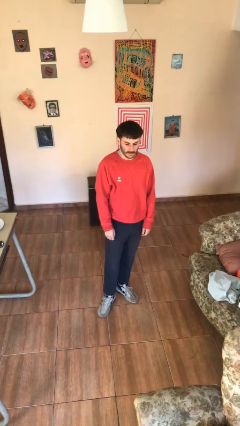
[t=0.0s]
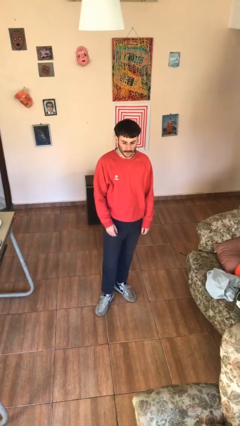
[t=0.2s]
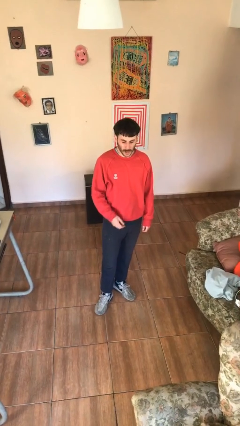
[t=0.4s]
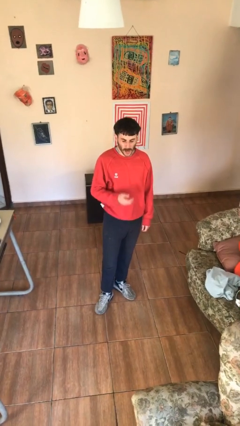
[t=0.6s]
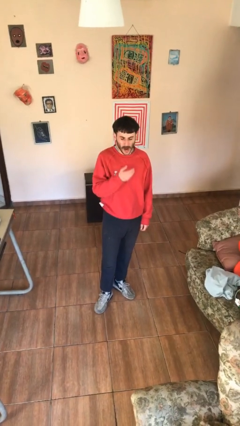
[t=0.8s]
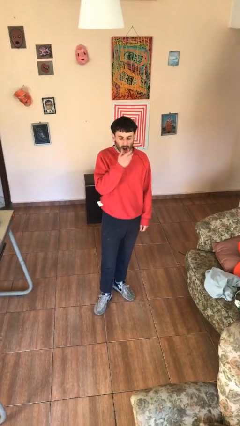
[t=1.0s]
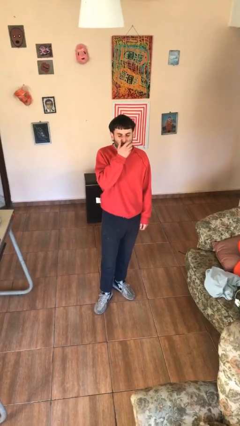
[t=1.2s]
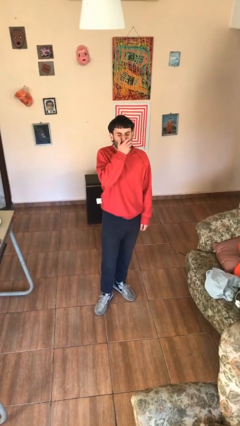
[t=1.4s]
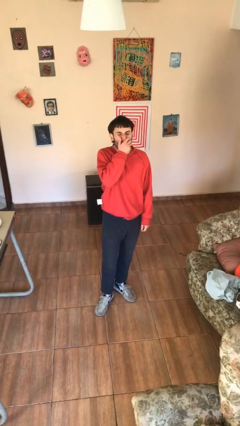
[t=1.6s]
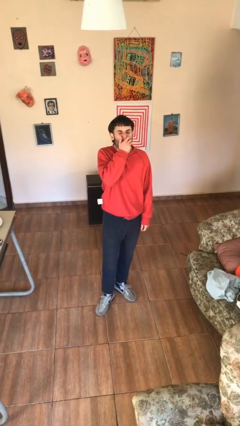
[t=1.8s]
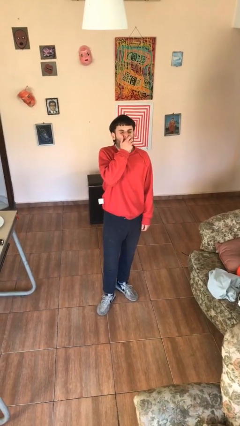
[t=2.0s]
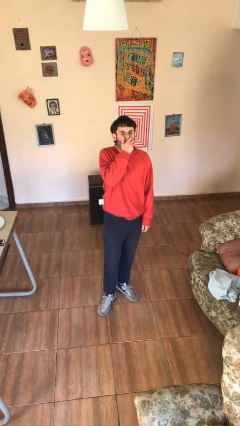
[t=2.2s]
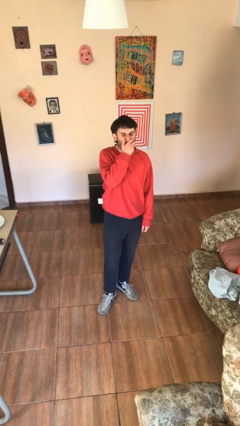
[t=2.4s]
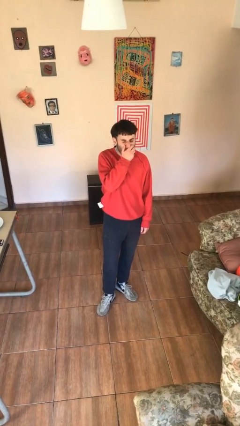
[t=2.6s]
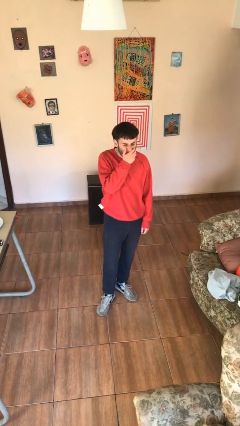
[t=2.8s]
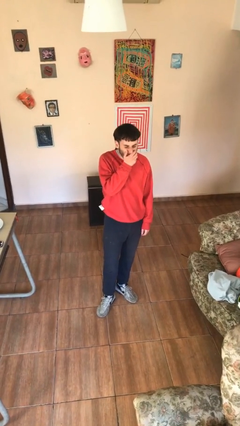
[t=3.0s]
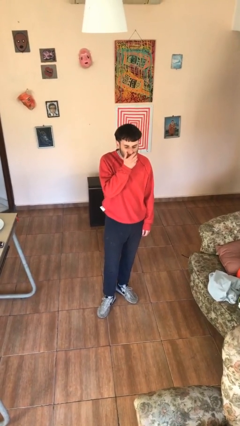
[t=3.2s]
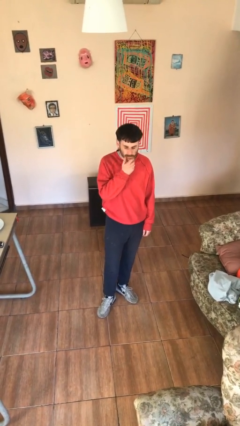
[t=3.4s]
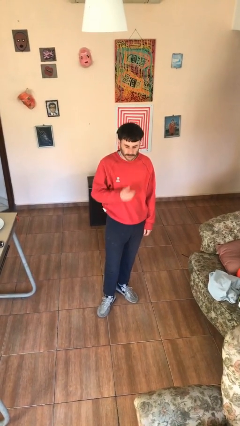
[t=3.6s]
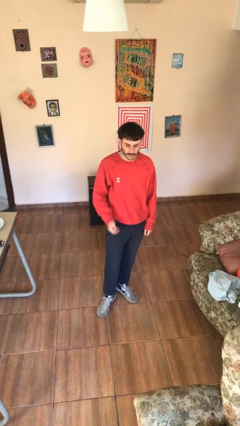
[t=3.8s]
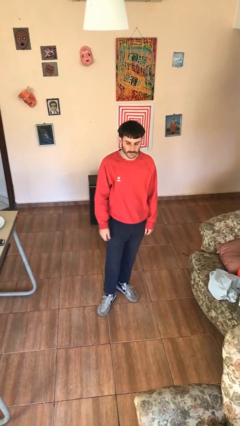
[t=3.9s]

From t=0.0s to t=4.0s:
person yawns

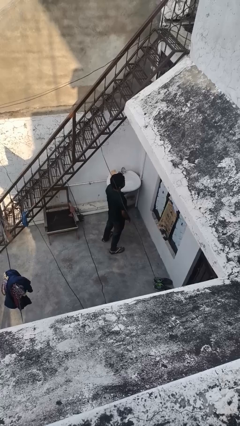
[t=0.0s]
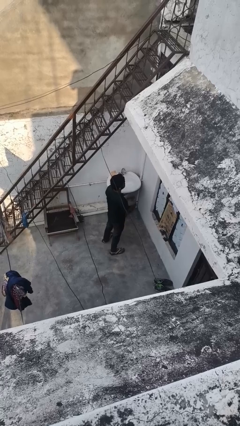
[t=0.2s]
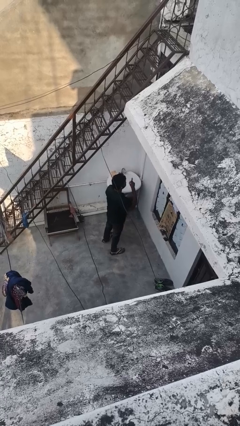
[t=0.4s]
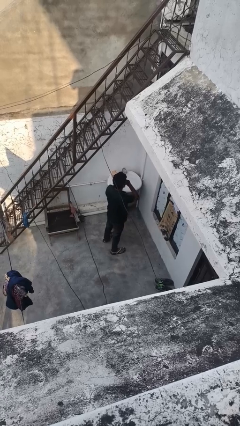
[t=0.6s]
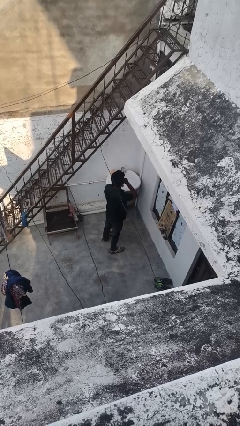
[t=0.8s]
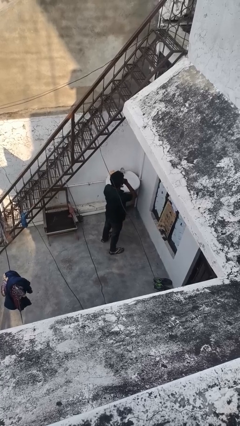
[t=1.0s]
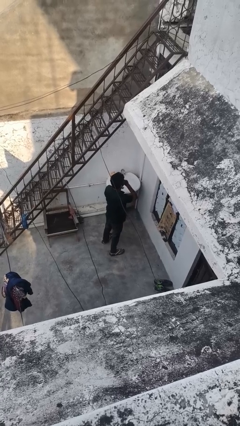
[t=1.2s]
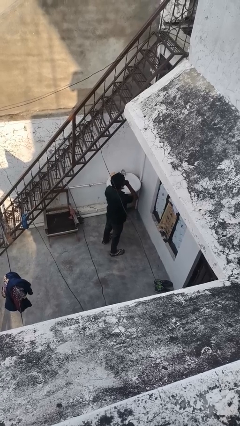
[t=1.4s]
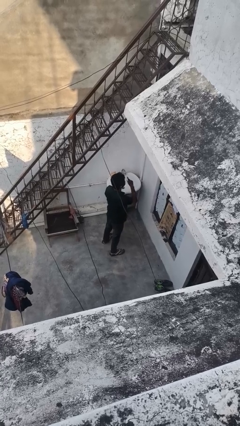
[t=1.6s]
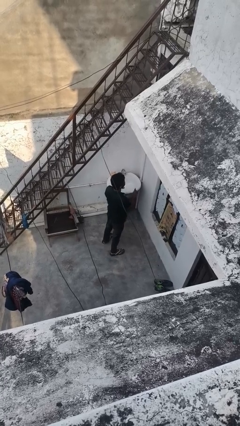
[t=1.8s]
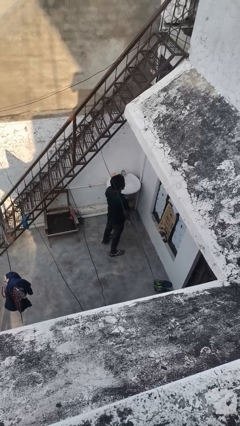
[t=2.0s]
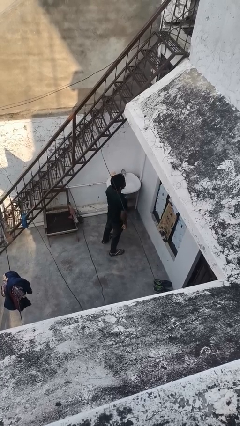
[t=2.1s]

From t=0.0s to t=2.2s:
person gestures be quiet

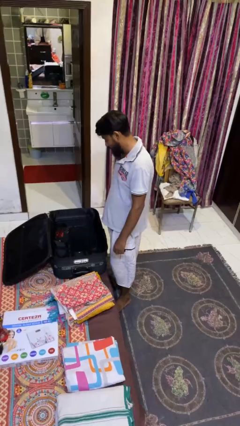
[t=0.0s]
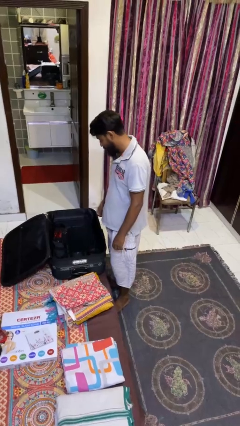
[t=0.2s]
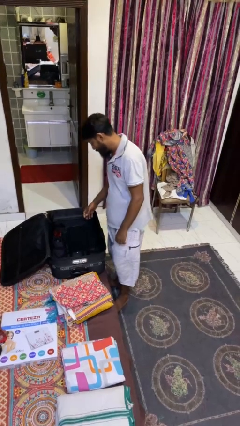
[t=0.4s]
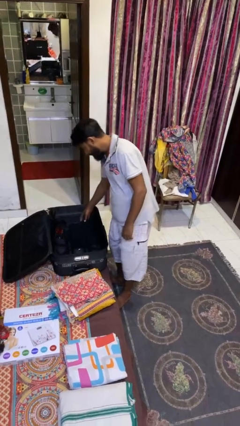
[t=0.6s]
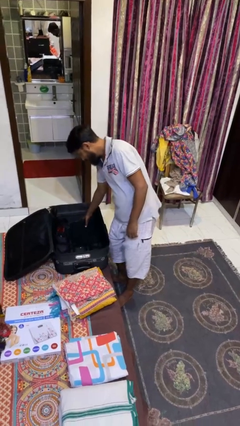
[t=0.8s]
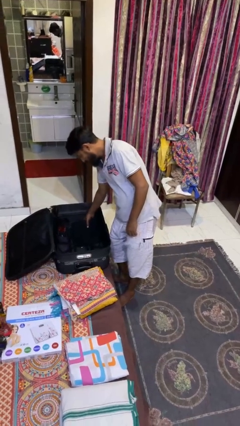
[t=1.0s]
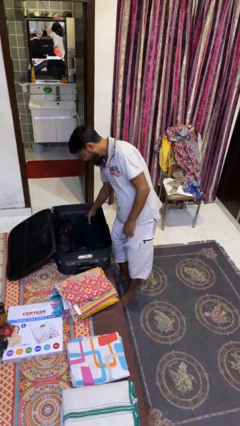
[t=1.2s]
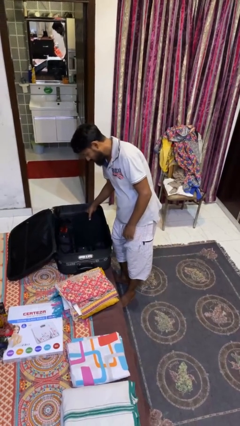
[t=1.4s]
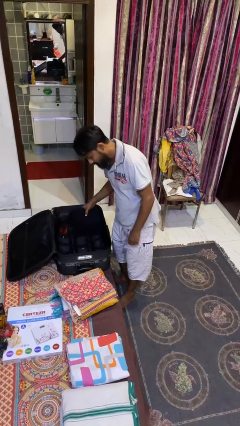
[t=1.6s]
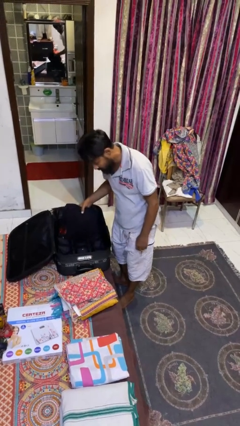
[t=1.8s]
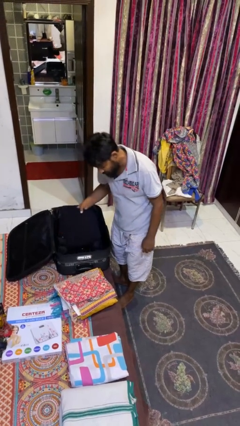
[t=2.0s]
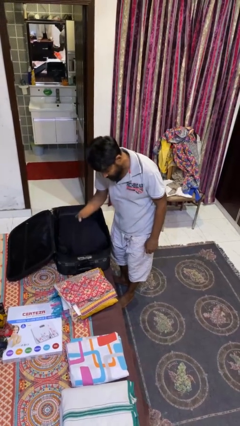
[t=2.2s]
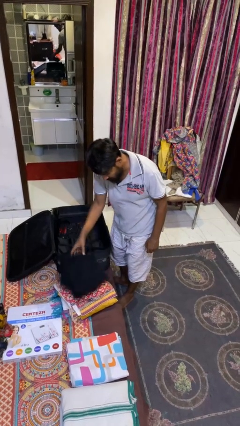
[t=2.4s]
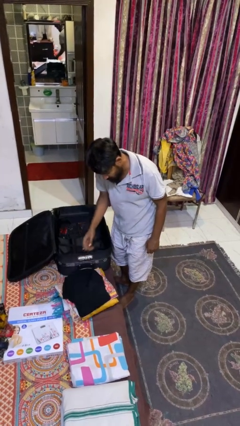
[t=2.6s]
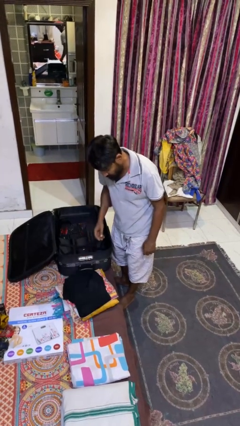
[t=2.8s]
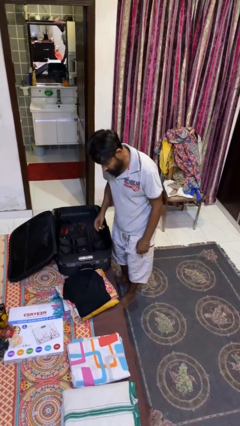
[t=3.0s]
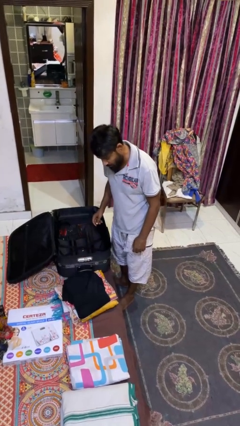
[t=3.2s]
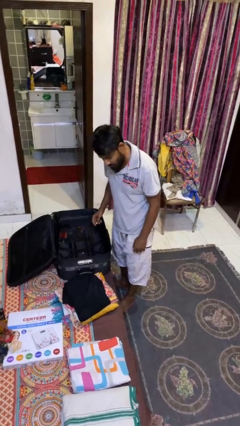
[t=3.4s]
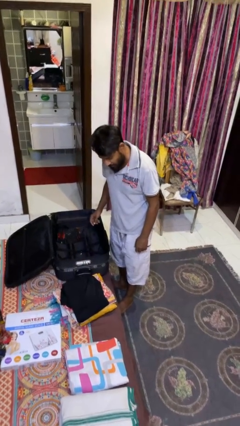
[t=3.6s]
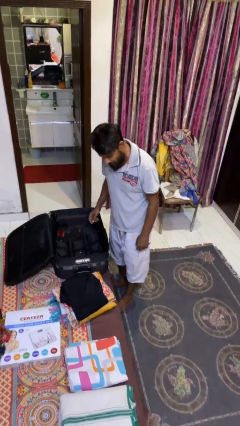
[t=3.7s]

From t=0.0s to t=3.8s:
person unloads clothes from suitcase

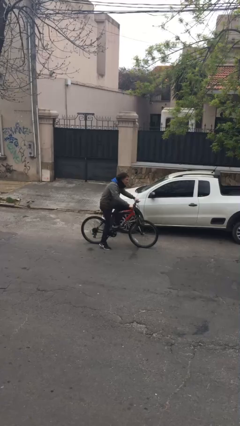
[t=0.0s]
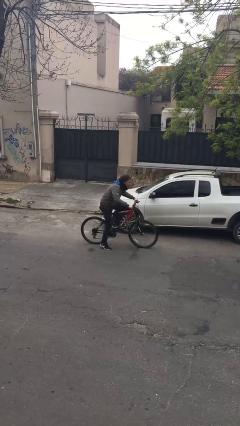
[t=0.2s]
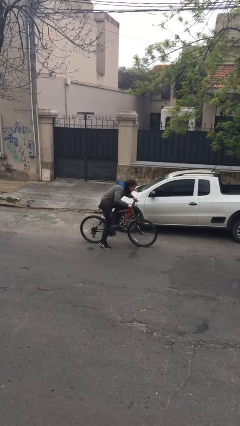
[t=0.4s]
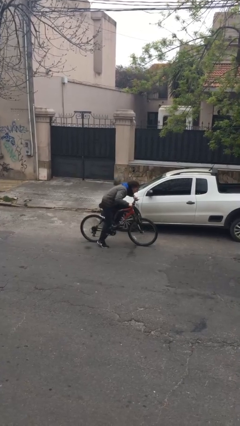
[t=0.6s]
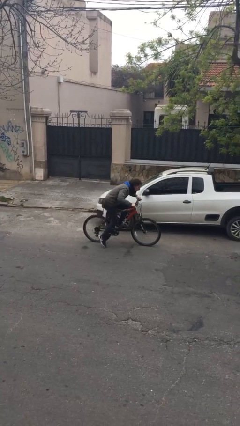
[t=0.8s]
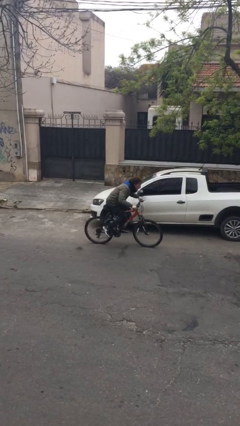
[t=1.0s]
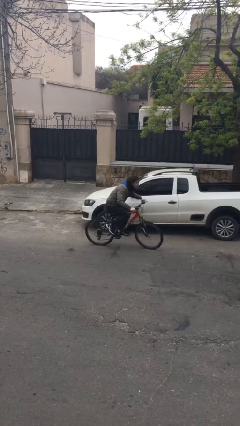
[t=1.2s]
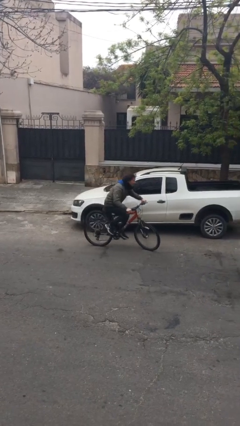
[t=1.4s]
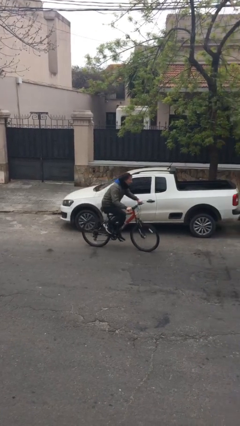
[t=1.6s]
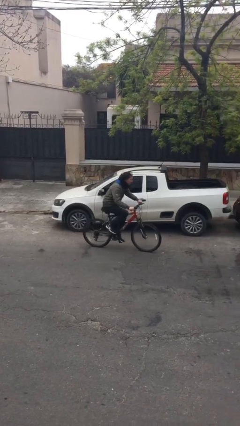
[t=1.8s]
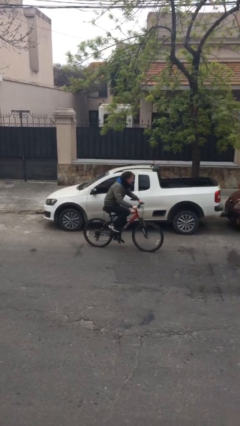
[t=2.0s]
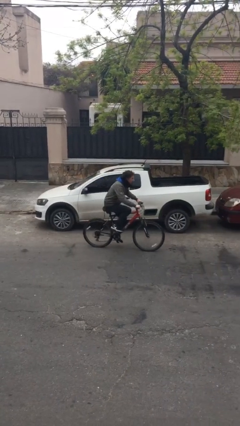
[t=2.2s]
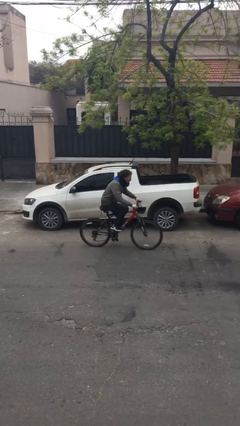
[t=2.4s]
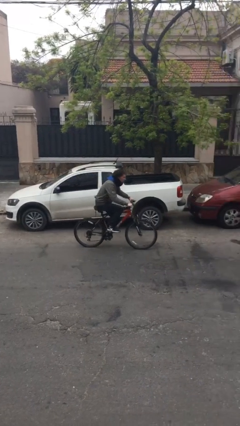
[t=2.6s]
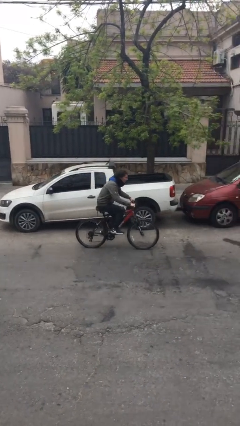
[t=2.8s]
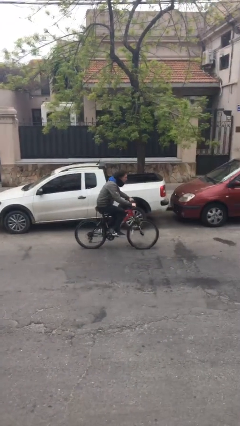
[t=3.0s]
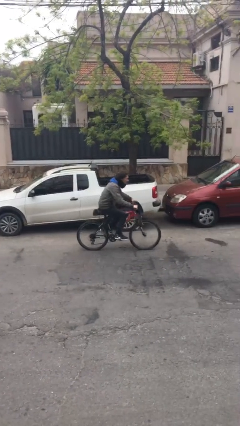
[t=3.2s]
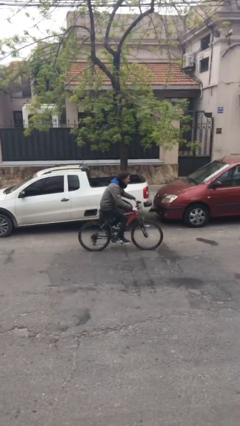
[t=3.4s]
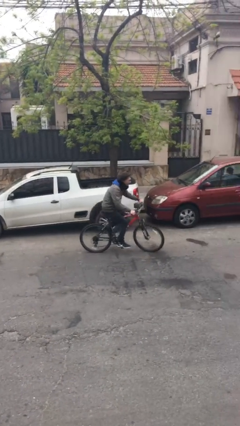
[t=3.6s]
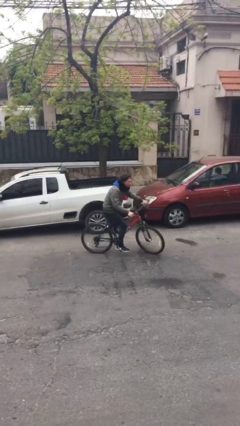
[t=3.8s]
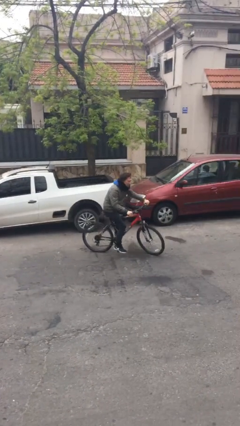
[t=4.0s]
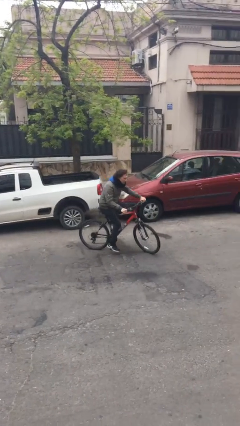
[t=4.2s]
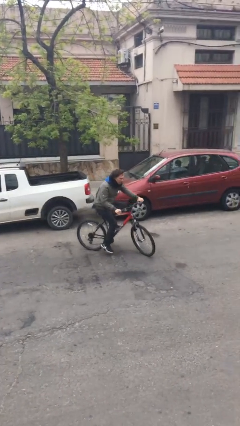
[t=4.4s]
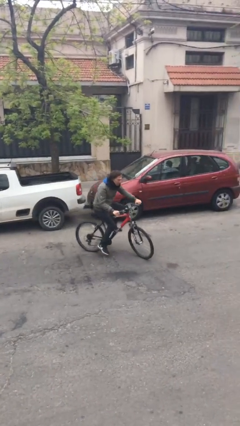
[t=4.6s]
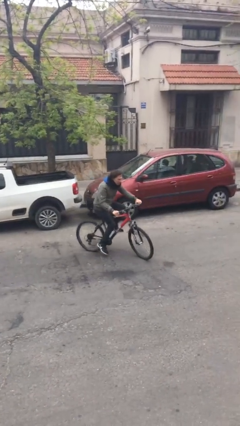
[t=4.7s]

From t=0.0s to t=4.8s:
person rides bicycle

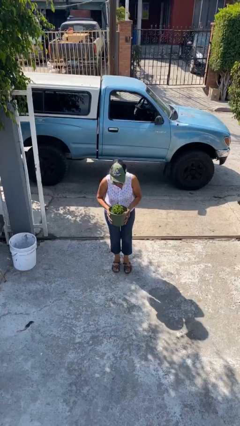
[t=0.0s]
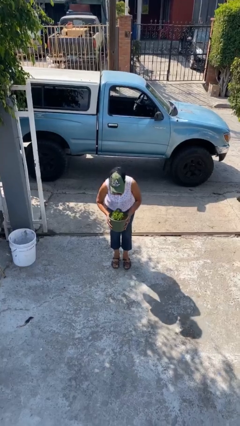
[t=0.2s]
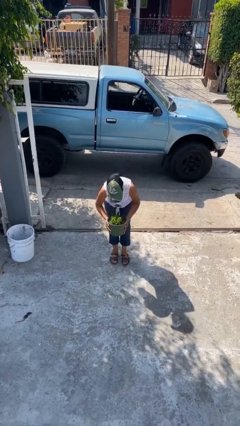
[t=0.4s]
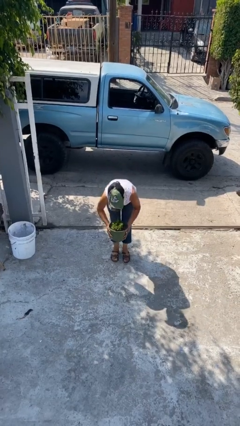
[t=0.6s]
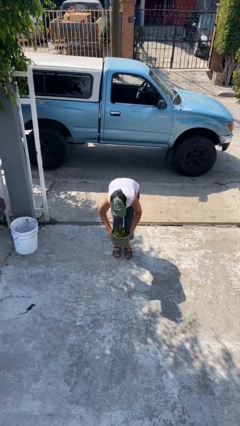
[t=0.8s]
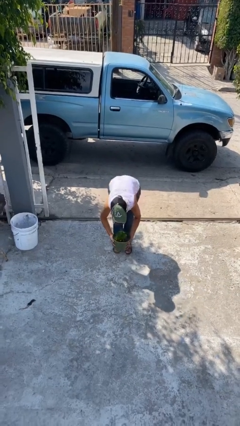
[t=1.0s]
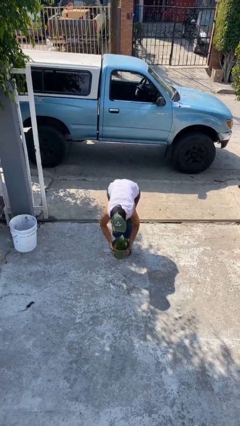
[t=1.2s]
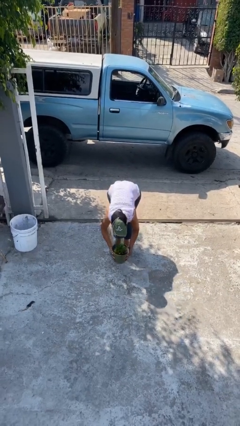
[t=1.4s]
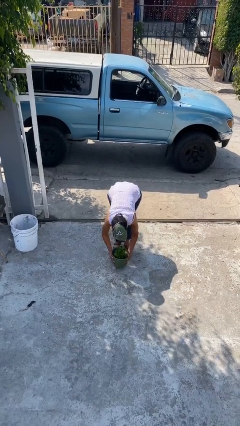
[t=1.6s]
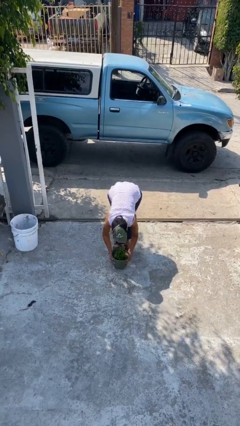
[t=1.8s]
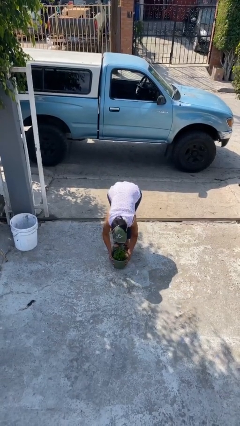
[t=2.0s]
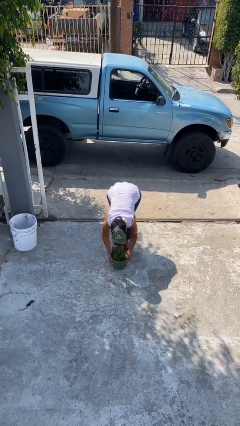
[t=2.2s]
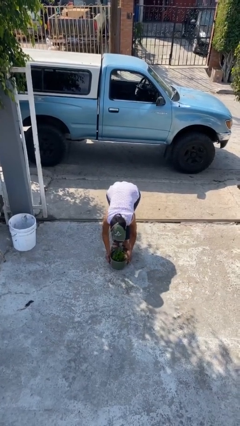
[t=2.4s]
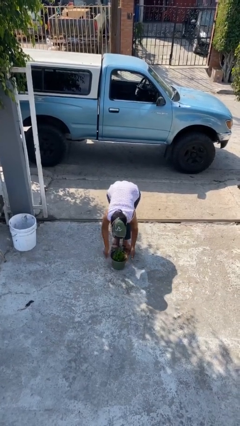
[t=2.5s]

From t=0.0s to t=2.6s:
person puts down object on floor
